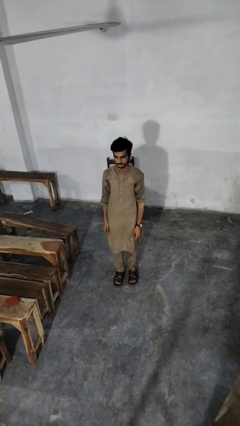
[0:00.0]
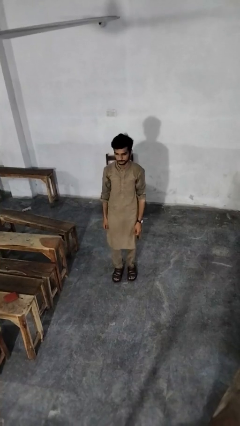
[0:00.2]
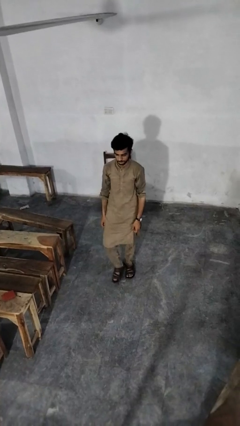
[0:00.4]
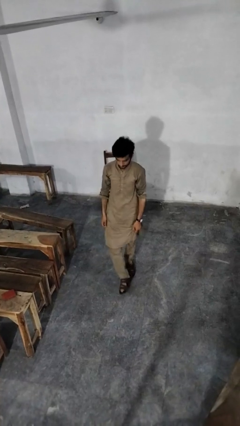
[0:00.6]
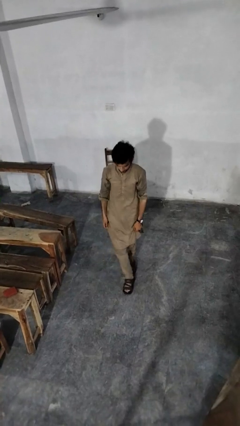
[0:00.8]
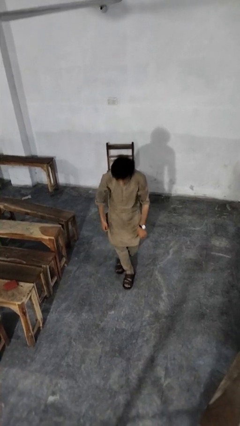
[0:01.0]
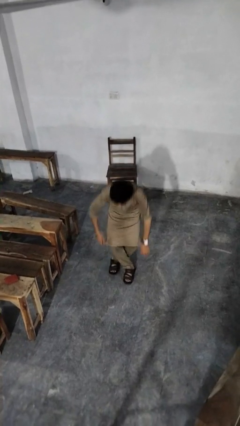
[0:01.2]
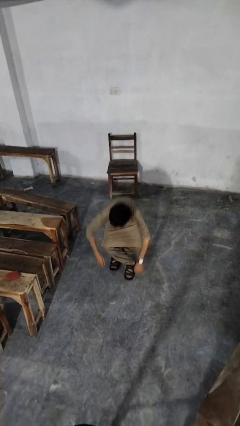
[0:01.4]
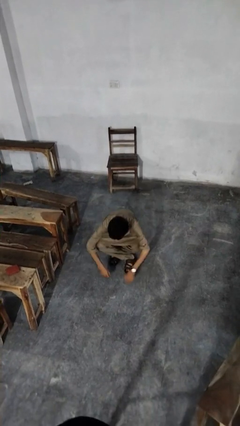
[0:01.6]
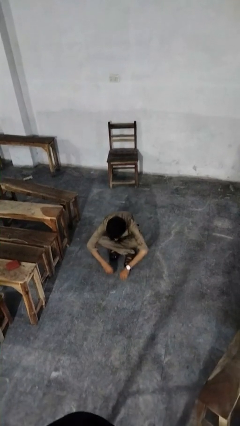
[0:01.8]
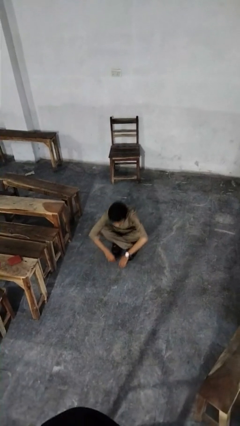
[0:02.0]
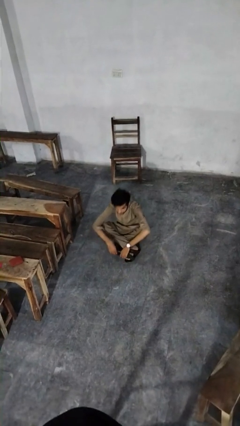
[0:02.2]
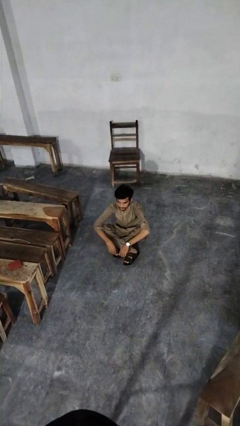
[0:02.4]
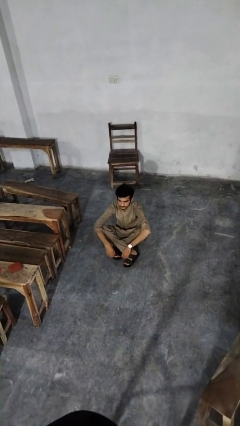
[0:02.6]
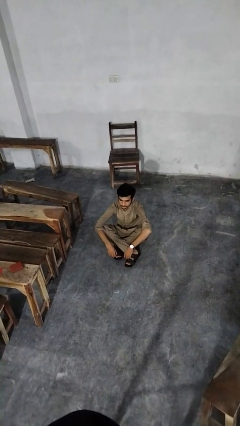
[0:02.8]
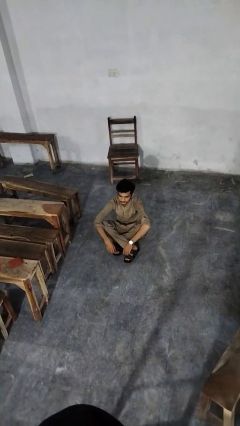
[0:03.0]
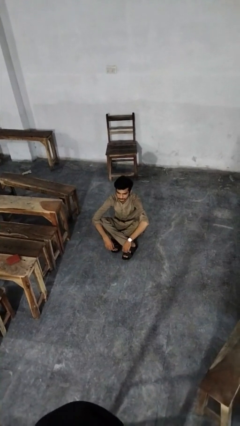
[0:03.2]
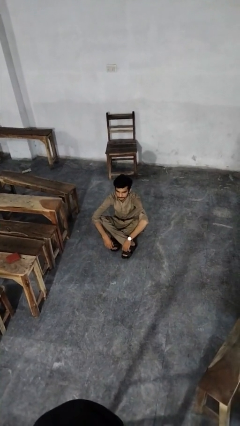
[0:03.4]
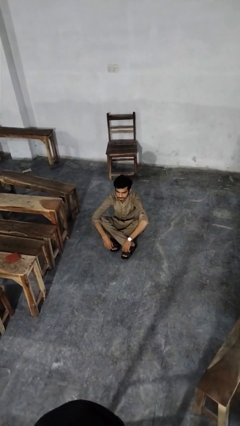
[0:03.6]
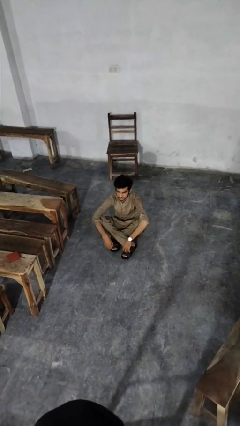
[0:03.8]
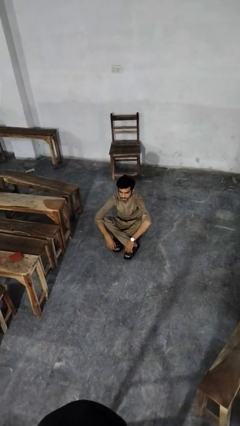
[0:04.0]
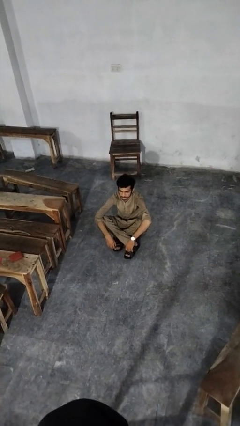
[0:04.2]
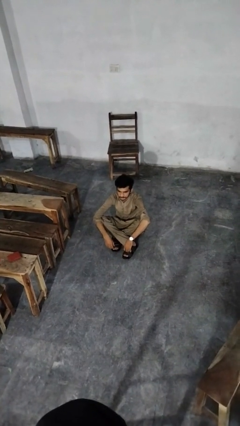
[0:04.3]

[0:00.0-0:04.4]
person sits crisscross

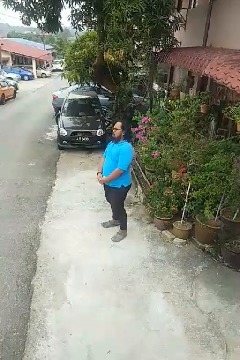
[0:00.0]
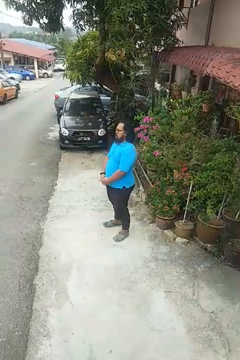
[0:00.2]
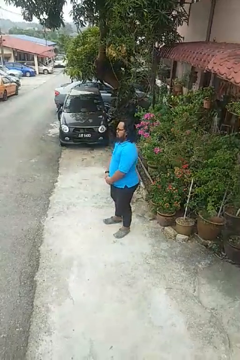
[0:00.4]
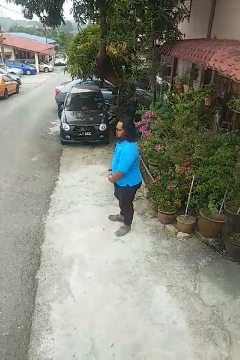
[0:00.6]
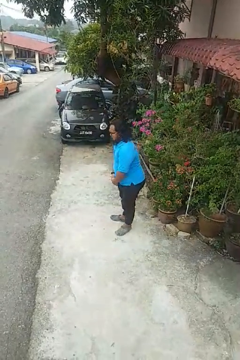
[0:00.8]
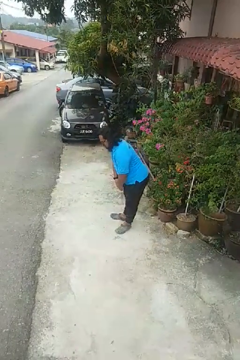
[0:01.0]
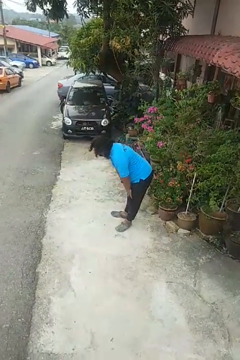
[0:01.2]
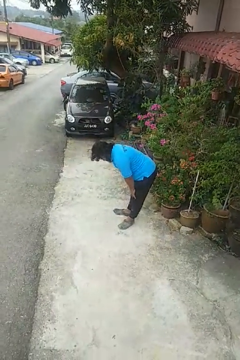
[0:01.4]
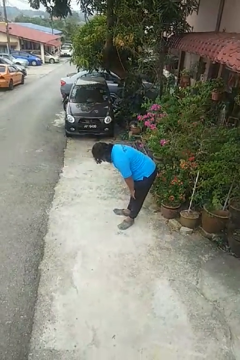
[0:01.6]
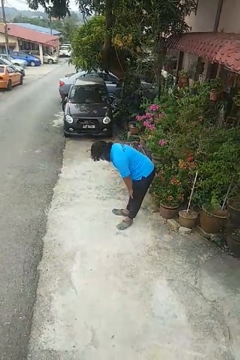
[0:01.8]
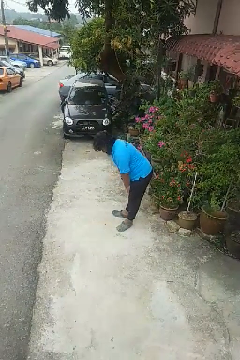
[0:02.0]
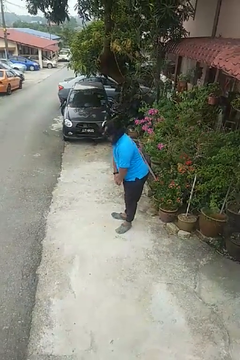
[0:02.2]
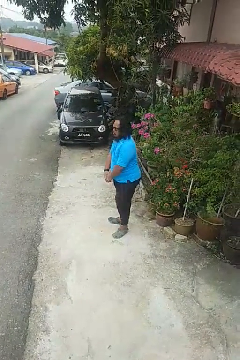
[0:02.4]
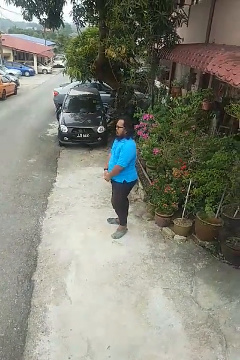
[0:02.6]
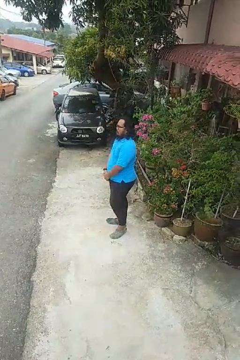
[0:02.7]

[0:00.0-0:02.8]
person bows

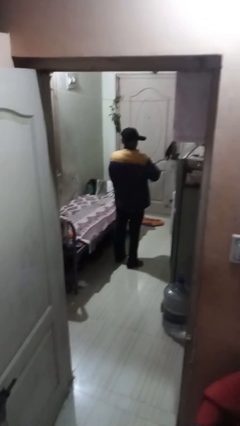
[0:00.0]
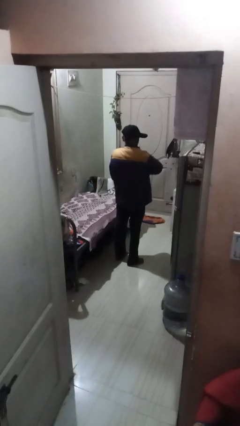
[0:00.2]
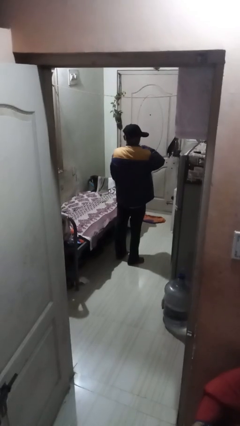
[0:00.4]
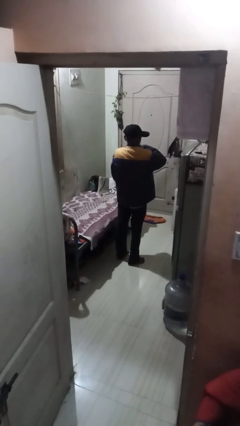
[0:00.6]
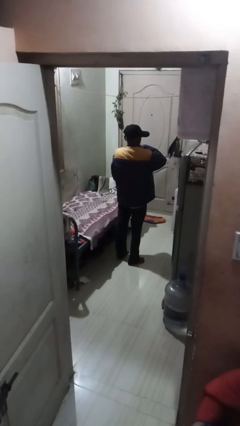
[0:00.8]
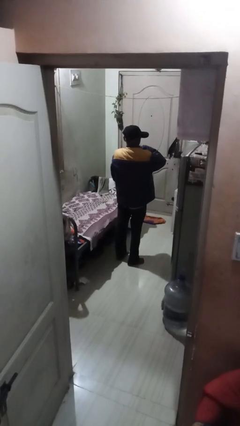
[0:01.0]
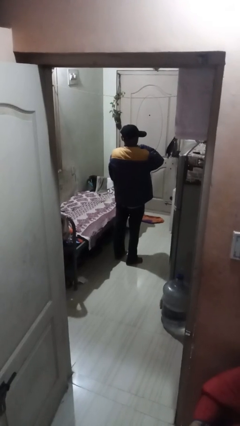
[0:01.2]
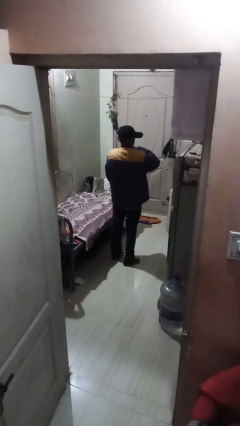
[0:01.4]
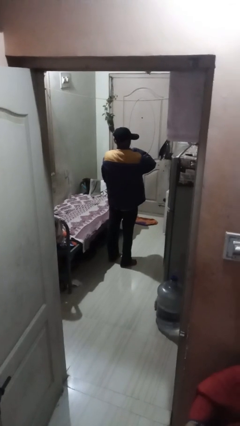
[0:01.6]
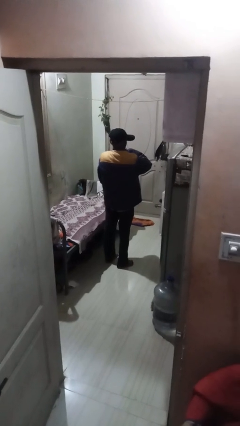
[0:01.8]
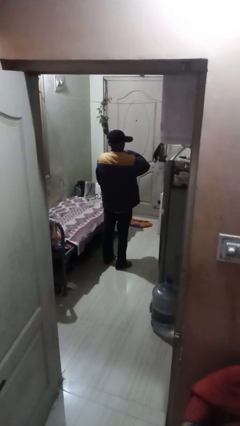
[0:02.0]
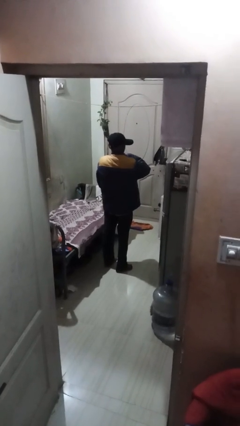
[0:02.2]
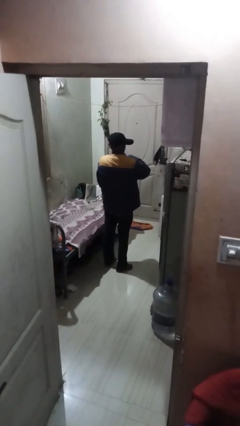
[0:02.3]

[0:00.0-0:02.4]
person zips up jacket

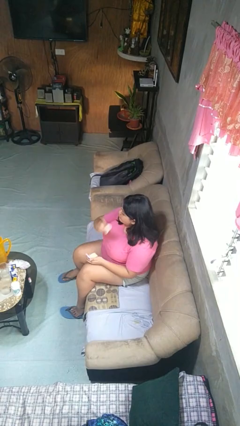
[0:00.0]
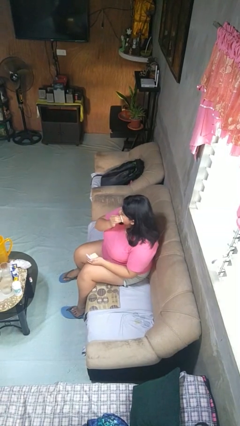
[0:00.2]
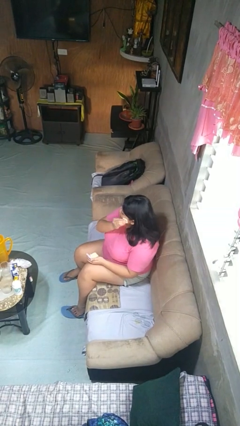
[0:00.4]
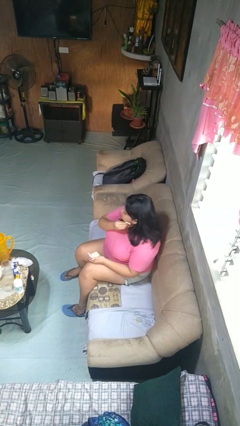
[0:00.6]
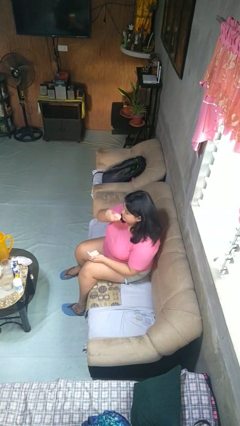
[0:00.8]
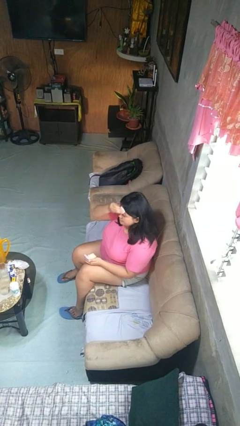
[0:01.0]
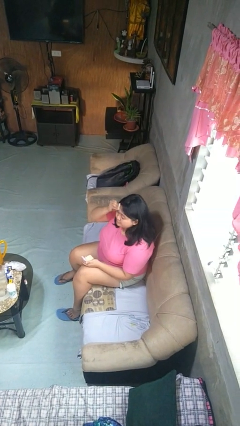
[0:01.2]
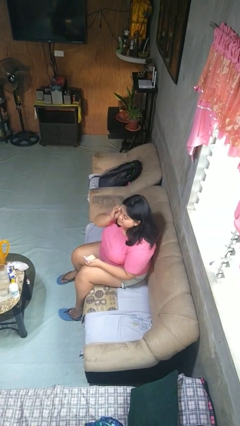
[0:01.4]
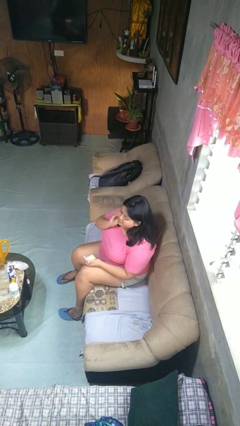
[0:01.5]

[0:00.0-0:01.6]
person applies foundation makeup

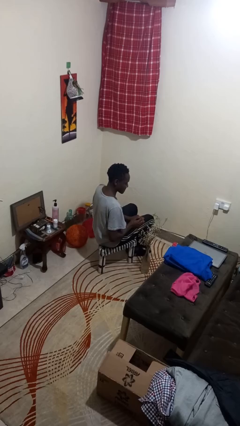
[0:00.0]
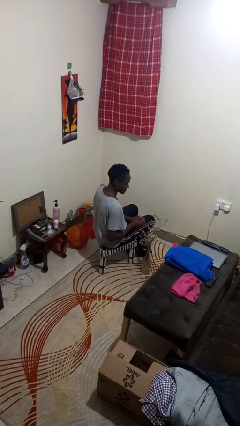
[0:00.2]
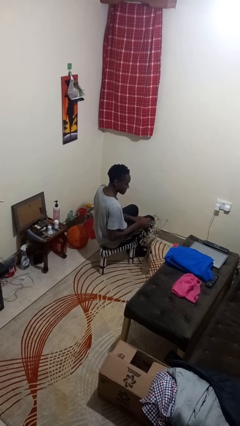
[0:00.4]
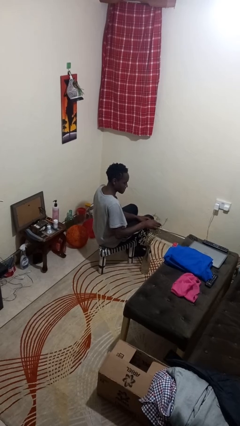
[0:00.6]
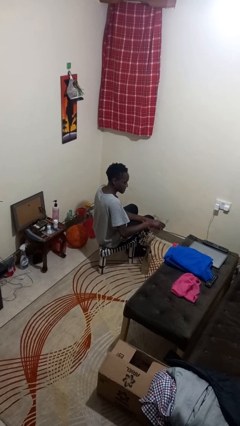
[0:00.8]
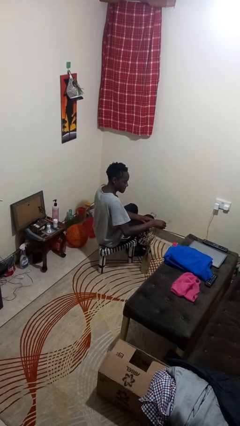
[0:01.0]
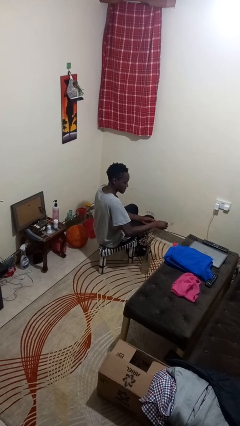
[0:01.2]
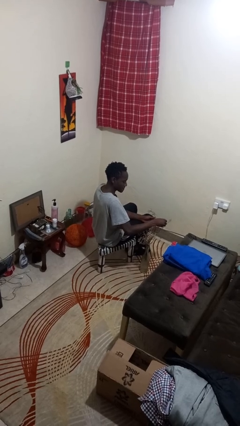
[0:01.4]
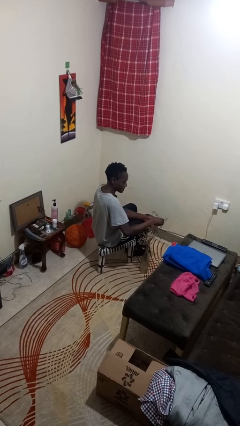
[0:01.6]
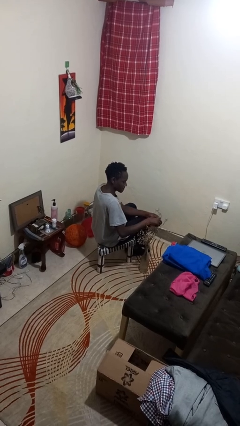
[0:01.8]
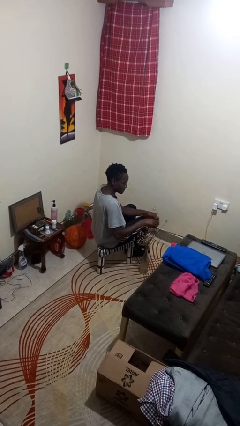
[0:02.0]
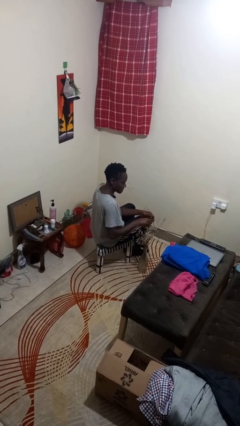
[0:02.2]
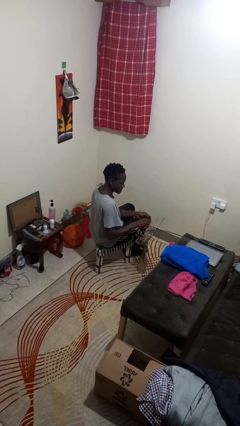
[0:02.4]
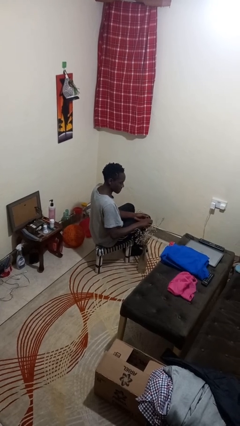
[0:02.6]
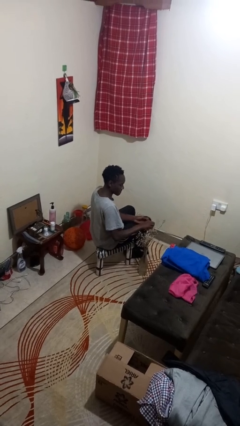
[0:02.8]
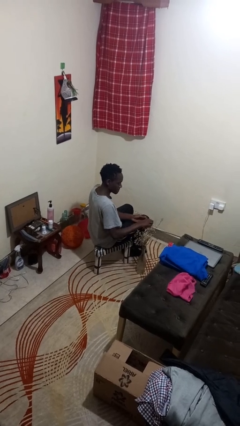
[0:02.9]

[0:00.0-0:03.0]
person arranges flowers in vase

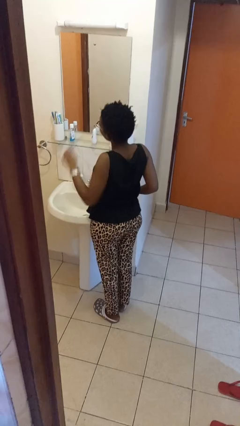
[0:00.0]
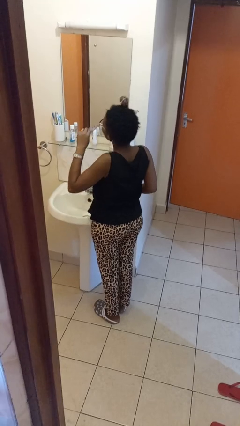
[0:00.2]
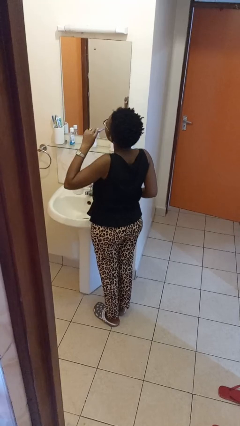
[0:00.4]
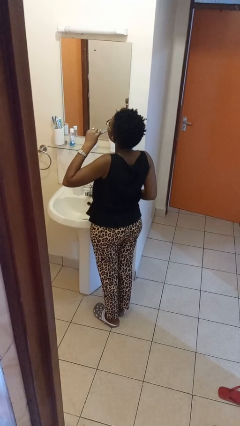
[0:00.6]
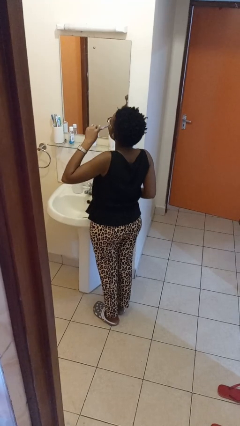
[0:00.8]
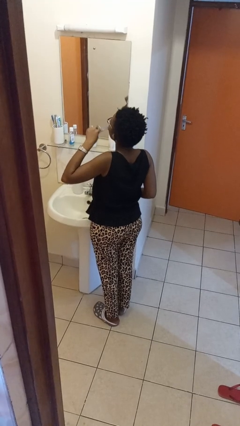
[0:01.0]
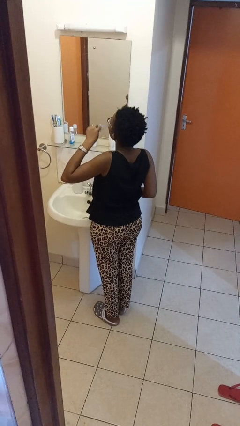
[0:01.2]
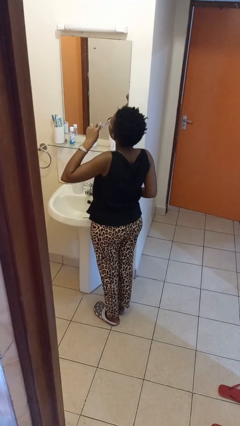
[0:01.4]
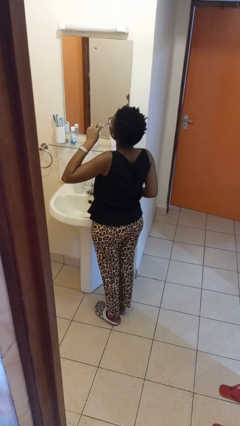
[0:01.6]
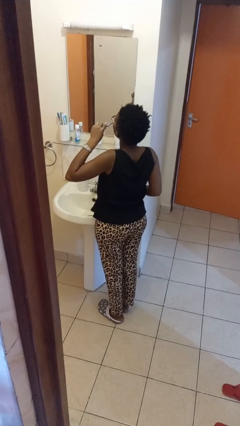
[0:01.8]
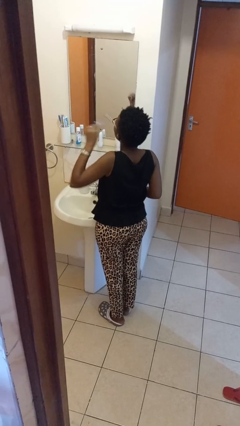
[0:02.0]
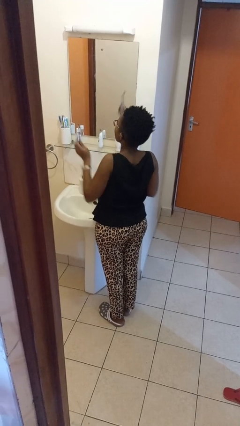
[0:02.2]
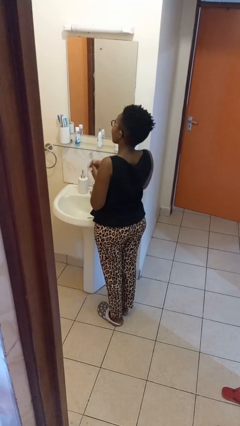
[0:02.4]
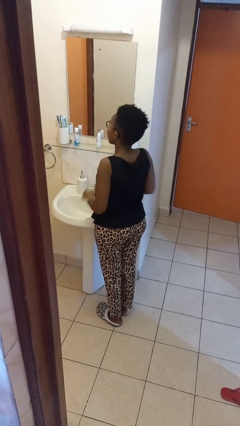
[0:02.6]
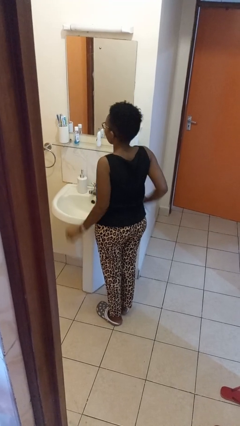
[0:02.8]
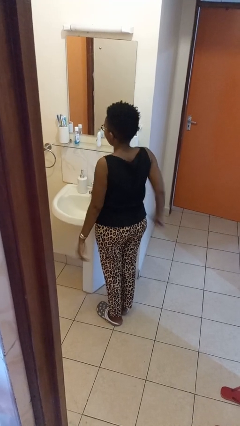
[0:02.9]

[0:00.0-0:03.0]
person brushes teeth

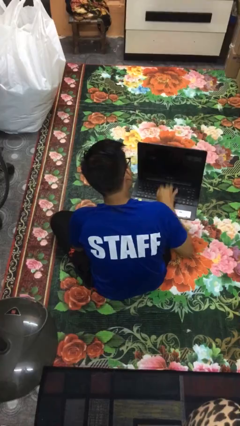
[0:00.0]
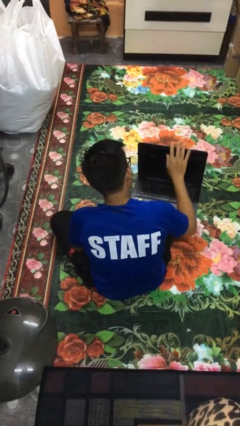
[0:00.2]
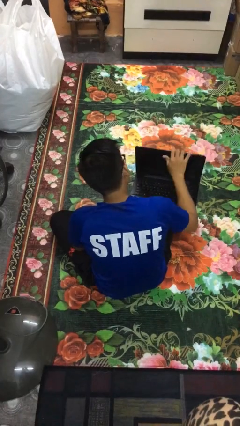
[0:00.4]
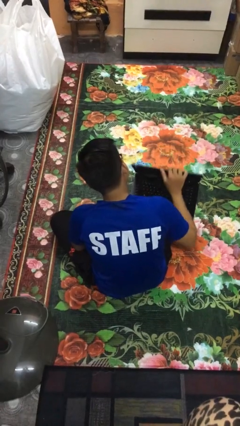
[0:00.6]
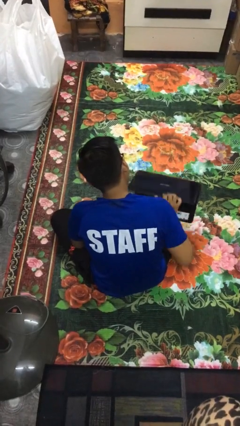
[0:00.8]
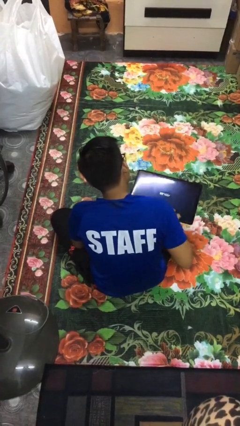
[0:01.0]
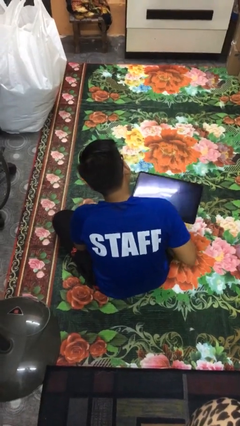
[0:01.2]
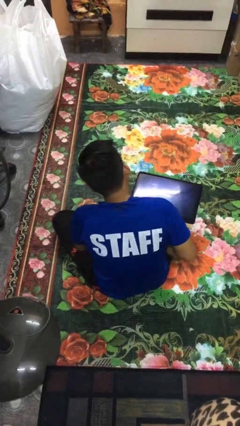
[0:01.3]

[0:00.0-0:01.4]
person closes laptop
